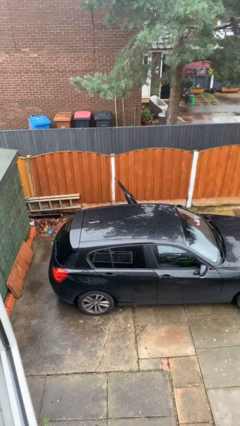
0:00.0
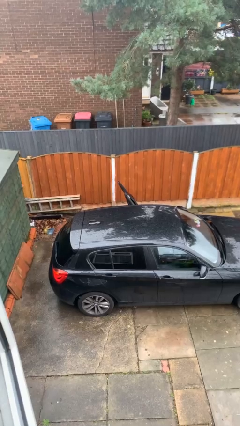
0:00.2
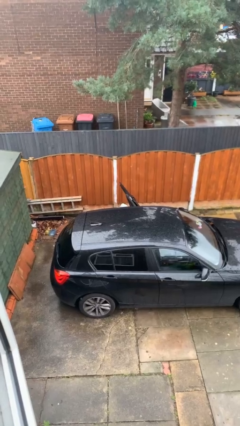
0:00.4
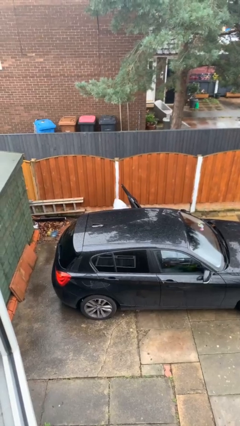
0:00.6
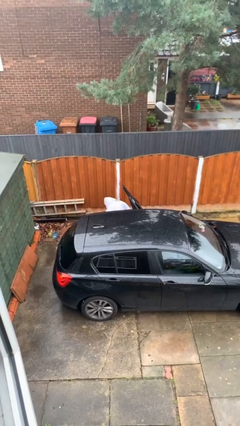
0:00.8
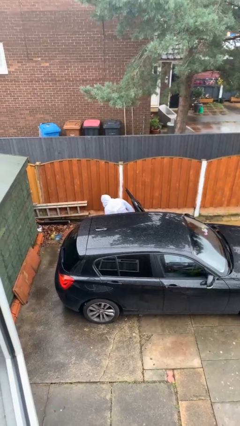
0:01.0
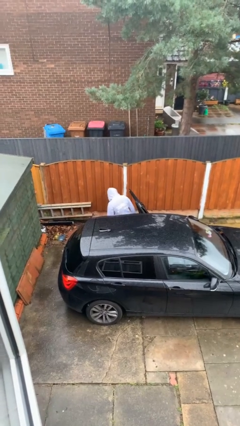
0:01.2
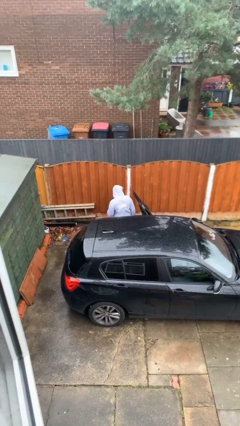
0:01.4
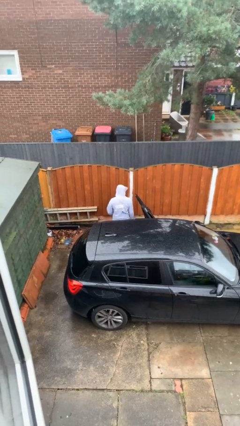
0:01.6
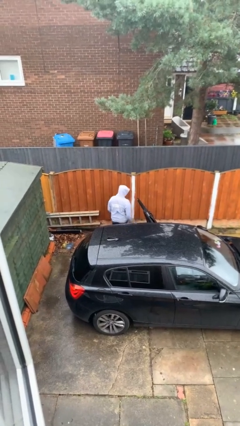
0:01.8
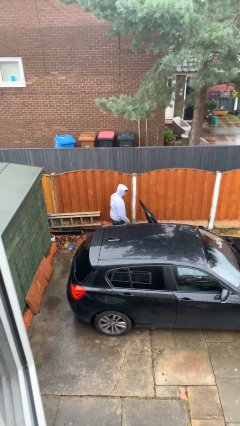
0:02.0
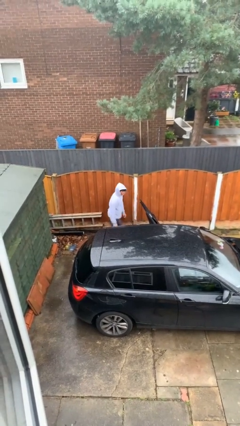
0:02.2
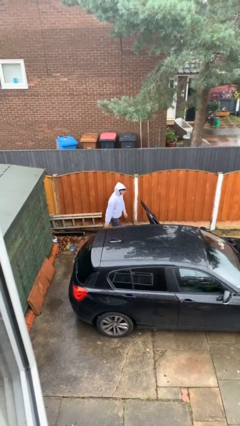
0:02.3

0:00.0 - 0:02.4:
person exits car

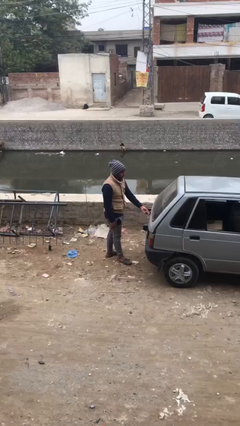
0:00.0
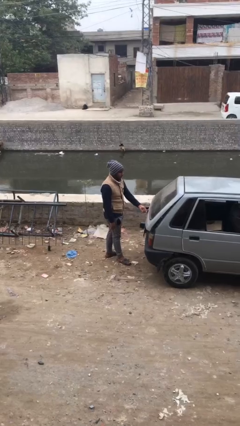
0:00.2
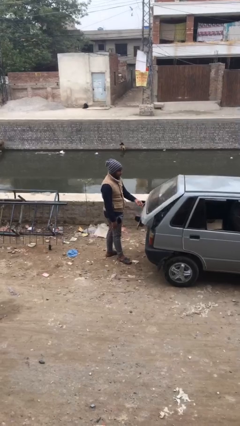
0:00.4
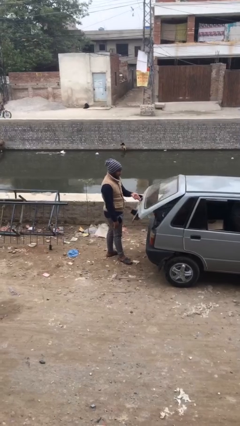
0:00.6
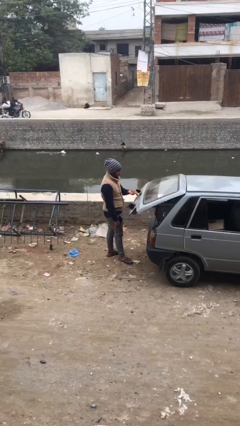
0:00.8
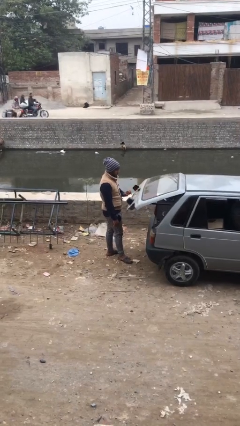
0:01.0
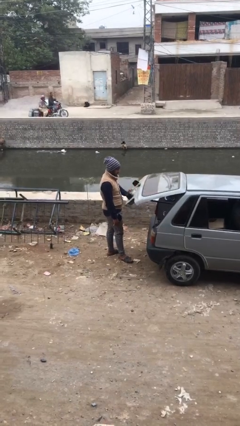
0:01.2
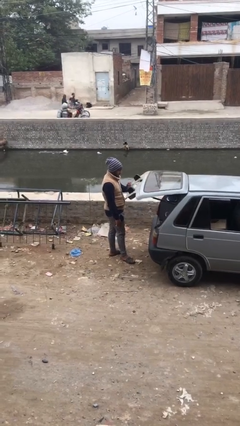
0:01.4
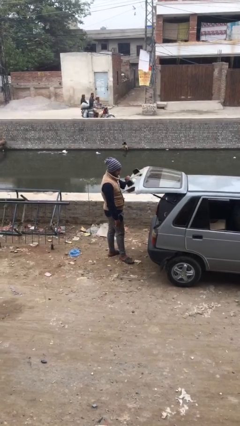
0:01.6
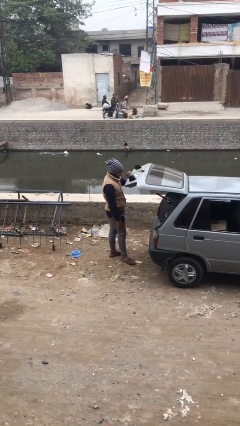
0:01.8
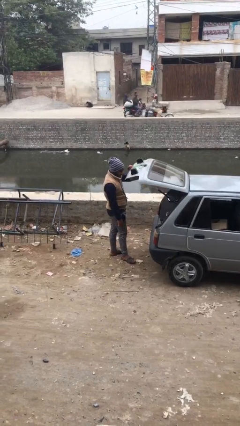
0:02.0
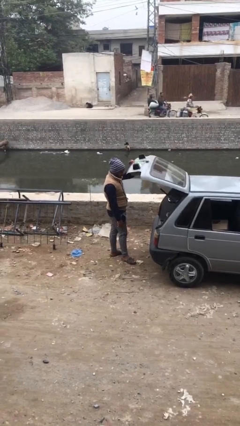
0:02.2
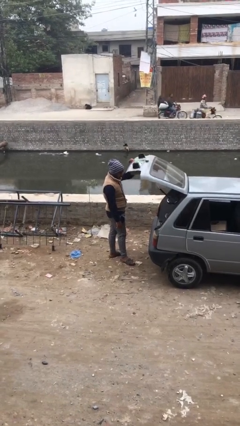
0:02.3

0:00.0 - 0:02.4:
person opens car trunk

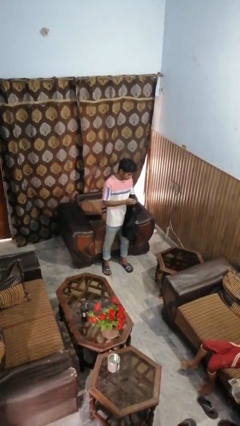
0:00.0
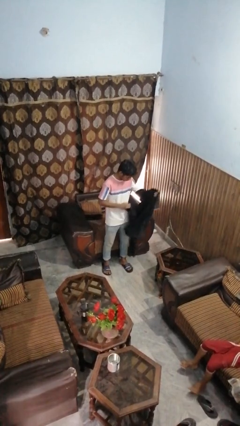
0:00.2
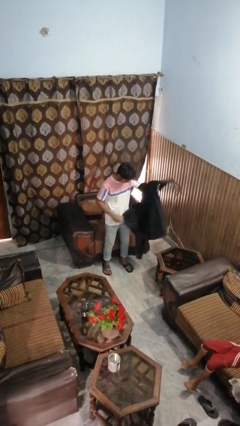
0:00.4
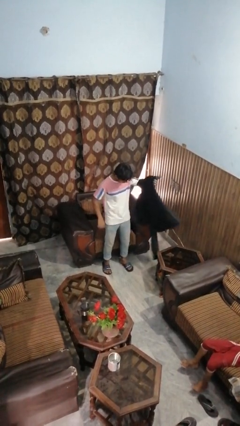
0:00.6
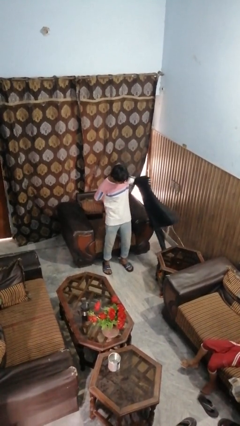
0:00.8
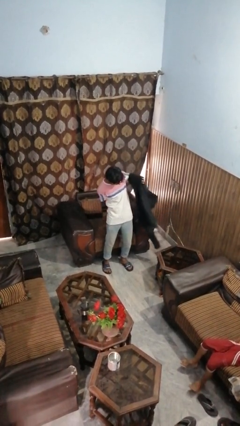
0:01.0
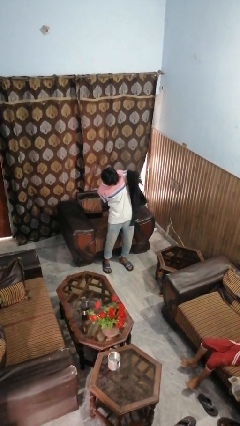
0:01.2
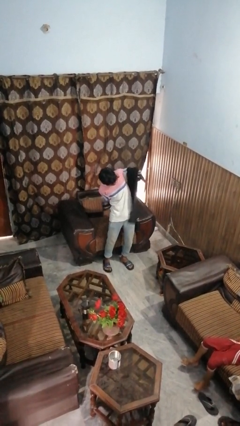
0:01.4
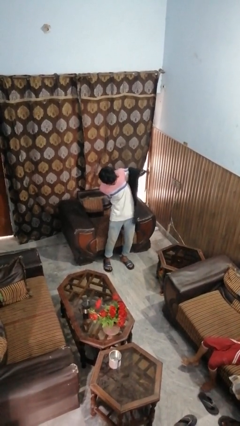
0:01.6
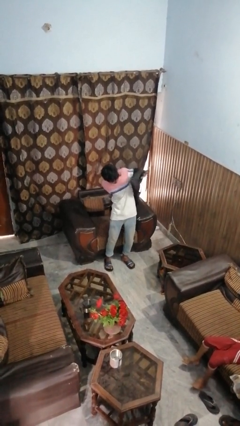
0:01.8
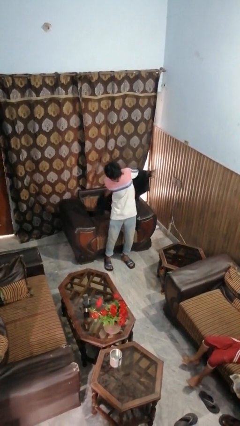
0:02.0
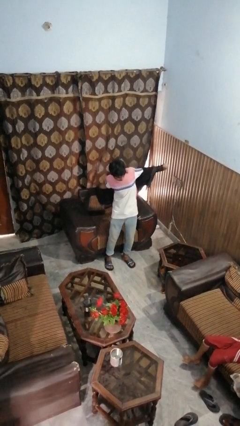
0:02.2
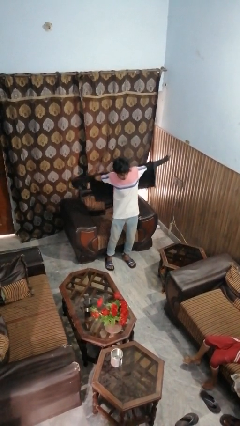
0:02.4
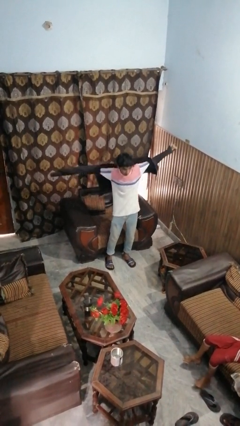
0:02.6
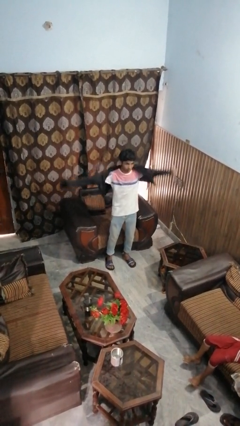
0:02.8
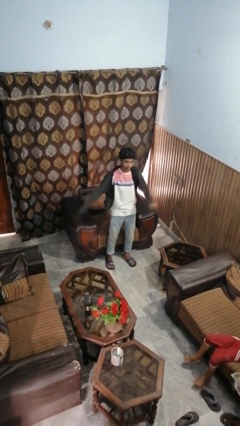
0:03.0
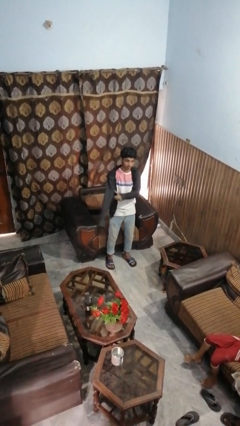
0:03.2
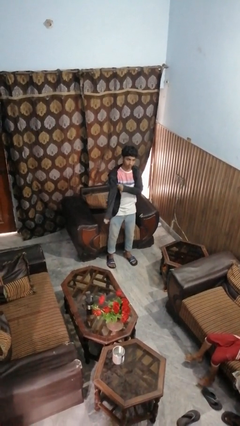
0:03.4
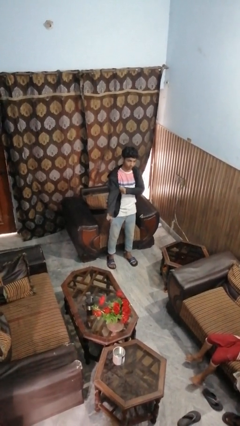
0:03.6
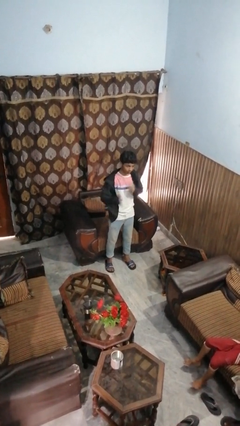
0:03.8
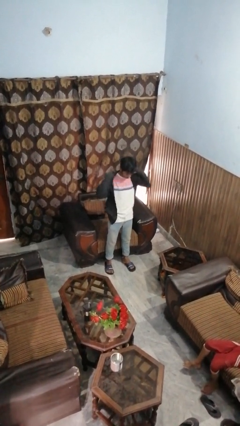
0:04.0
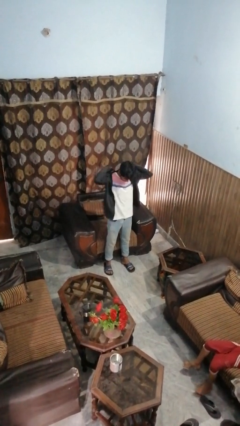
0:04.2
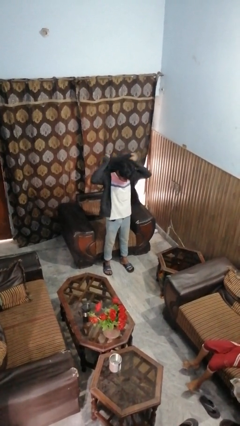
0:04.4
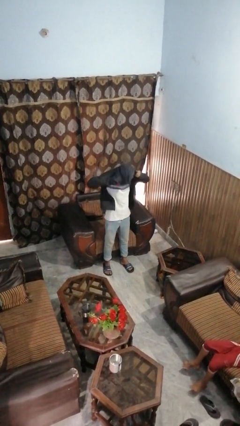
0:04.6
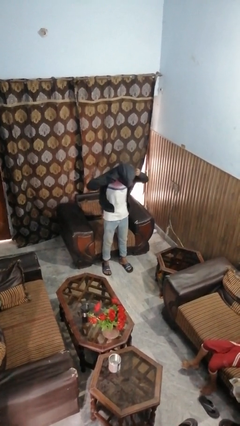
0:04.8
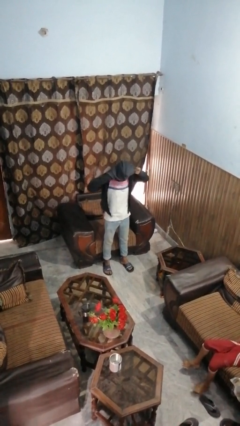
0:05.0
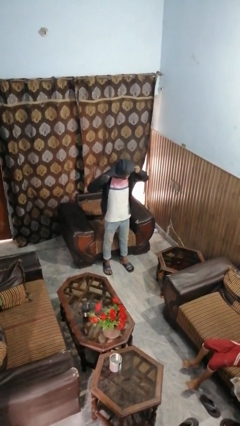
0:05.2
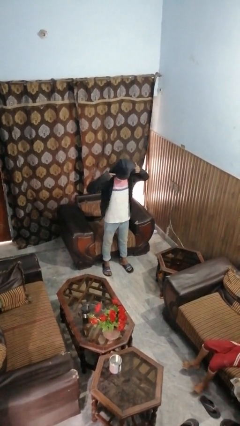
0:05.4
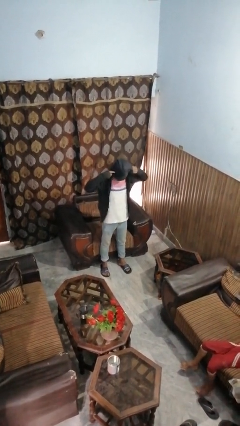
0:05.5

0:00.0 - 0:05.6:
person puts on hoodie

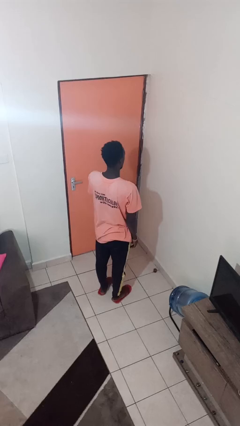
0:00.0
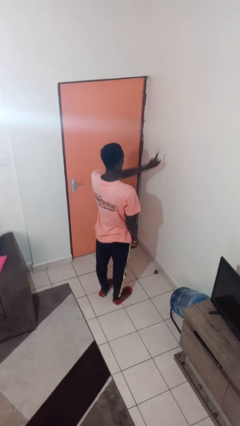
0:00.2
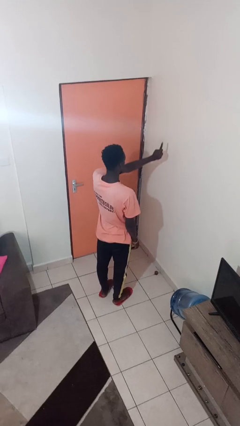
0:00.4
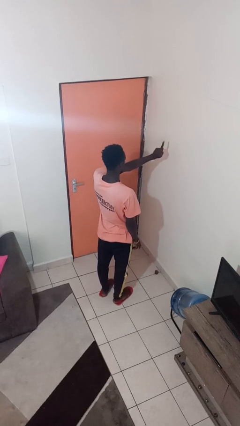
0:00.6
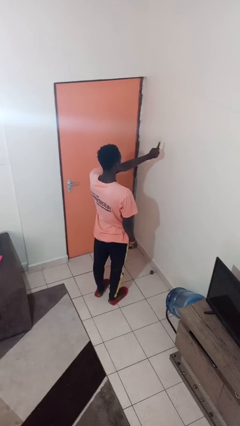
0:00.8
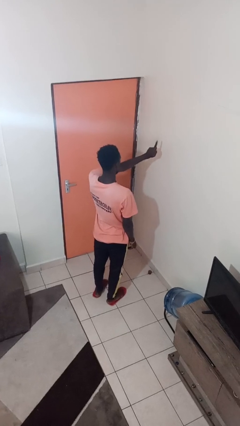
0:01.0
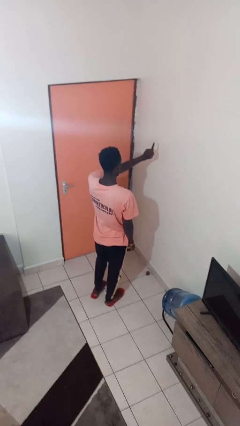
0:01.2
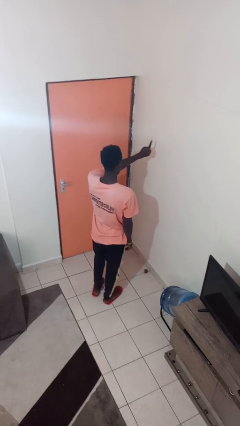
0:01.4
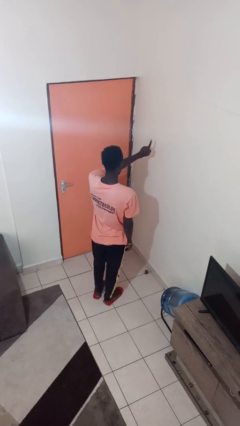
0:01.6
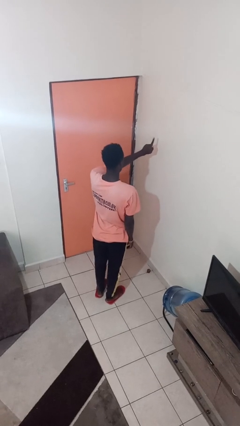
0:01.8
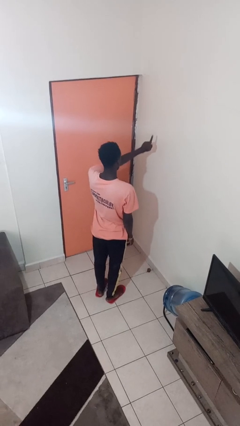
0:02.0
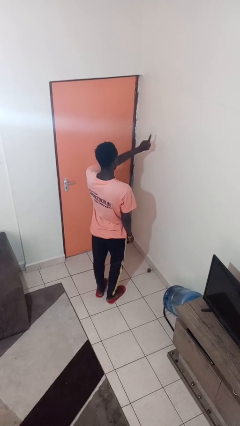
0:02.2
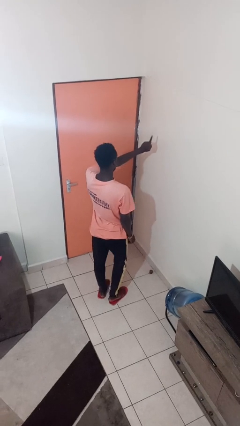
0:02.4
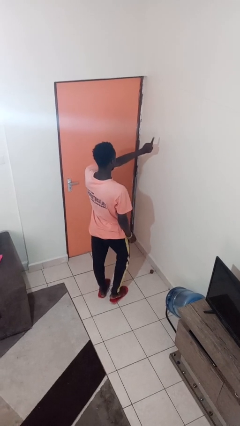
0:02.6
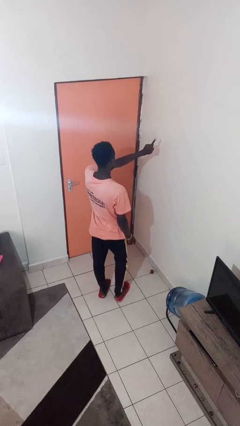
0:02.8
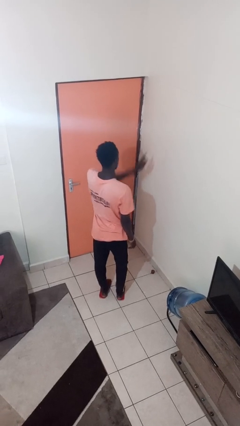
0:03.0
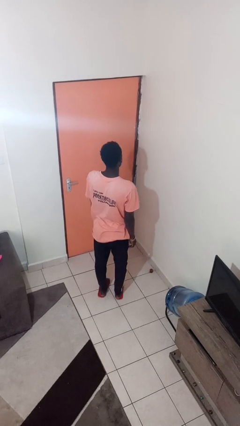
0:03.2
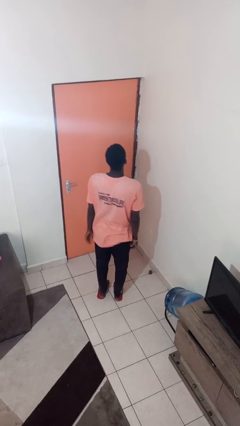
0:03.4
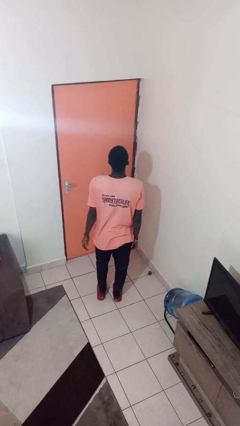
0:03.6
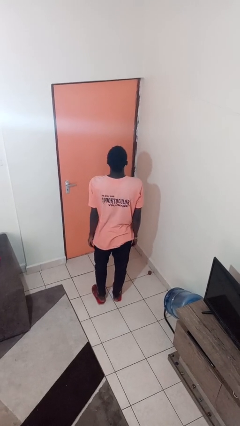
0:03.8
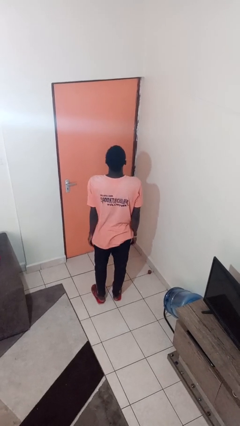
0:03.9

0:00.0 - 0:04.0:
person gestures number one

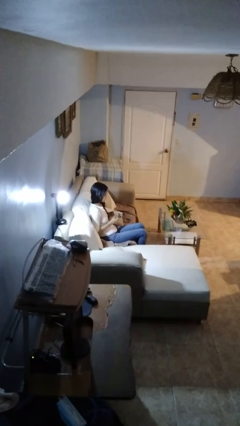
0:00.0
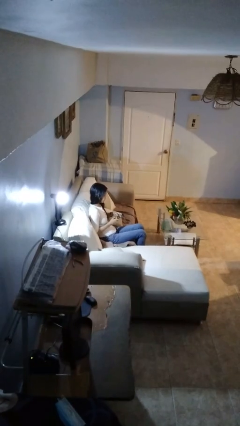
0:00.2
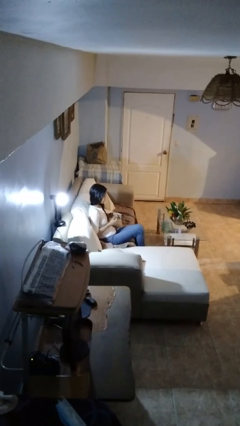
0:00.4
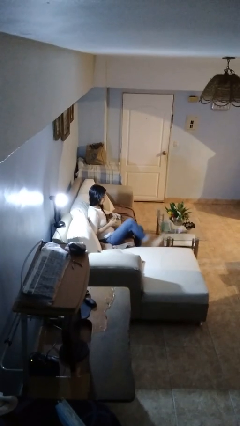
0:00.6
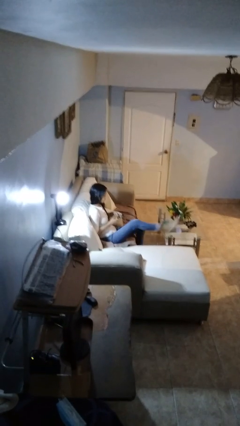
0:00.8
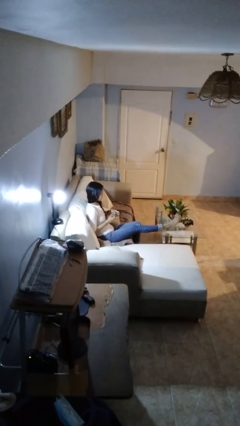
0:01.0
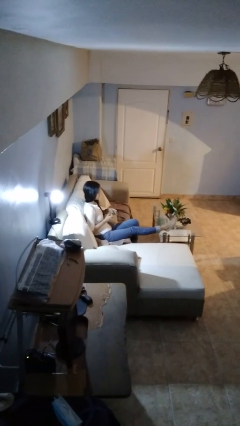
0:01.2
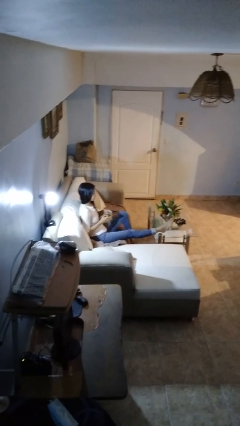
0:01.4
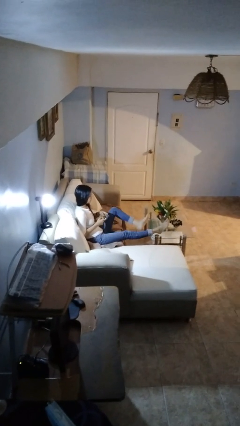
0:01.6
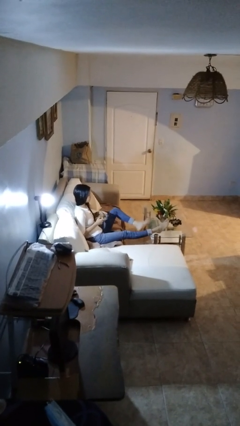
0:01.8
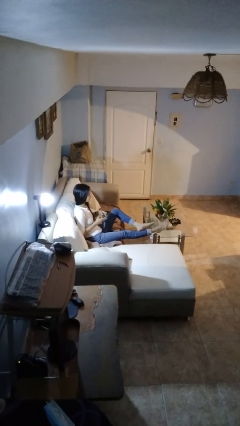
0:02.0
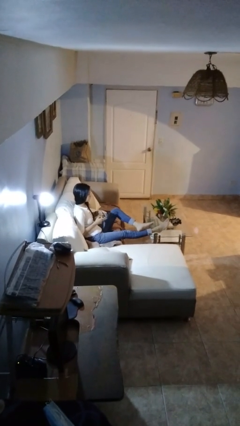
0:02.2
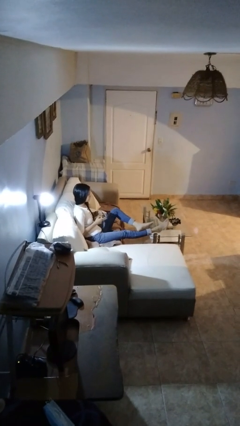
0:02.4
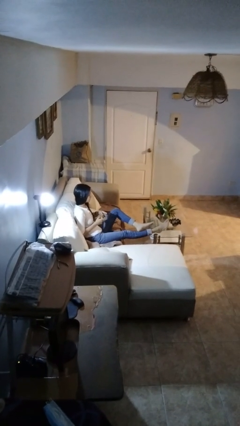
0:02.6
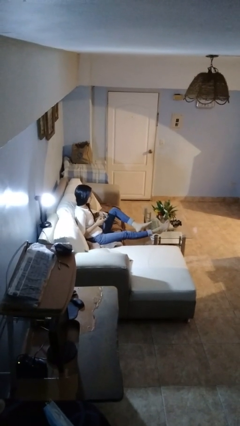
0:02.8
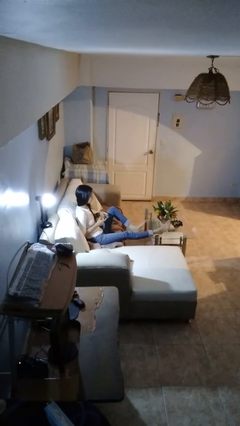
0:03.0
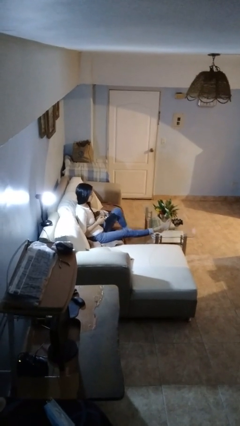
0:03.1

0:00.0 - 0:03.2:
person puts feet up

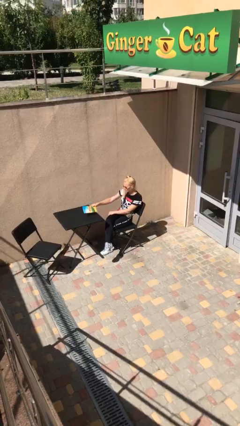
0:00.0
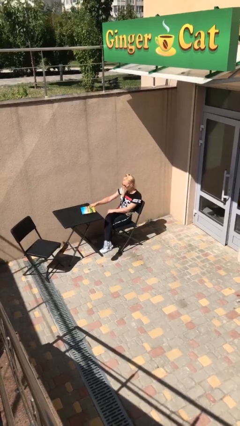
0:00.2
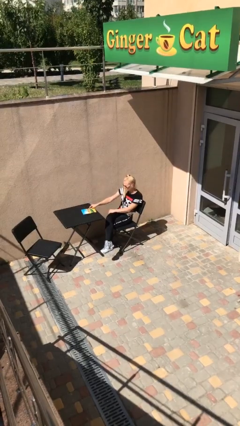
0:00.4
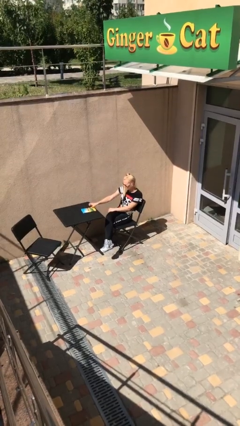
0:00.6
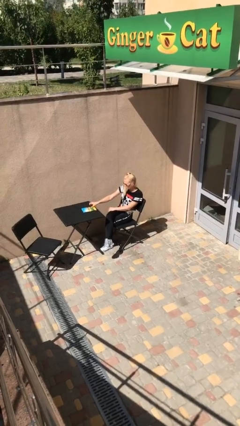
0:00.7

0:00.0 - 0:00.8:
person puts down object on table
